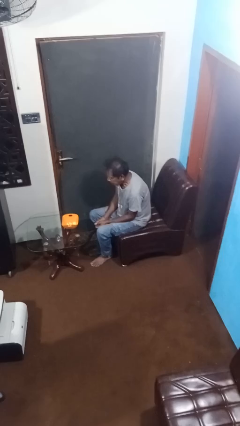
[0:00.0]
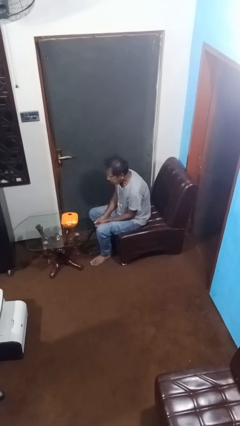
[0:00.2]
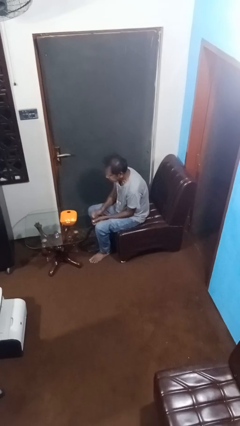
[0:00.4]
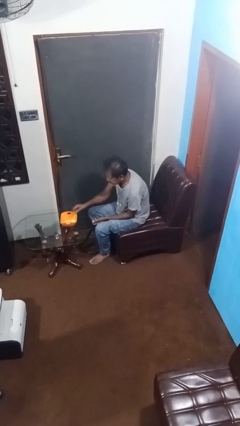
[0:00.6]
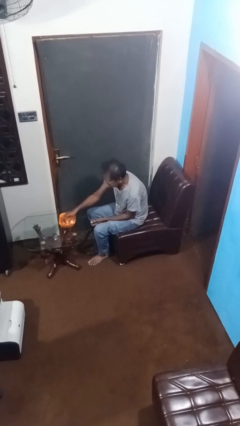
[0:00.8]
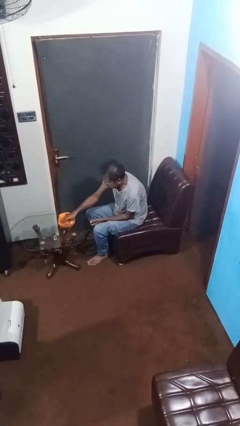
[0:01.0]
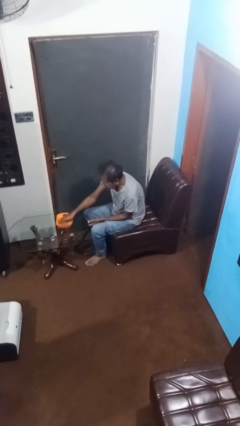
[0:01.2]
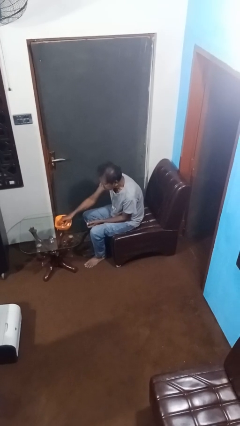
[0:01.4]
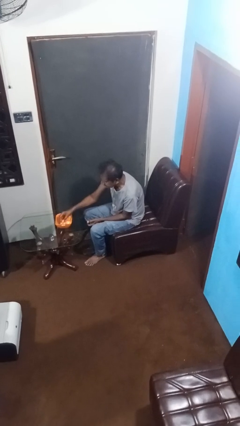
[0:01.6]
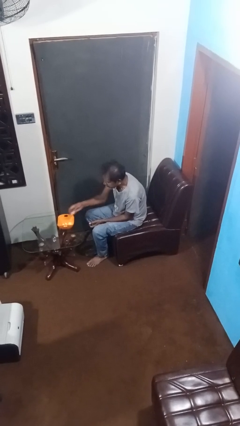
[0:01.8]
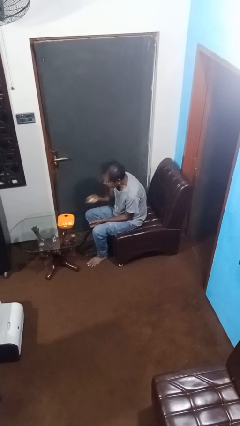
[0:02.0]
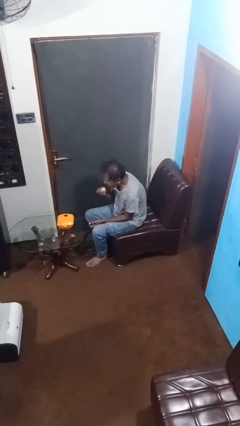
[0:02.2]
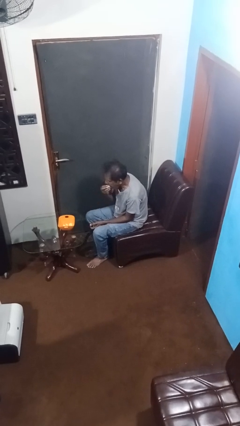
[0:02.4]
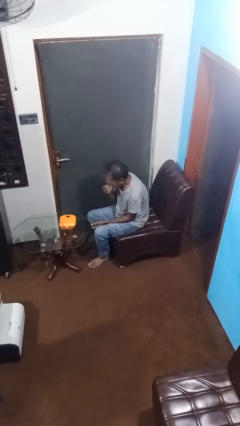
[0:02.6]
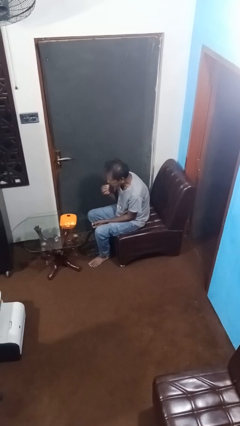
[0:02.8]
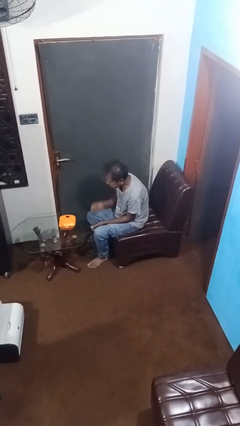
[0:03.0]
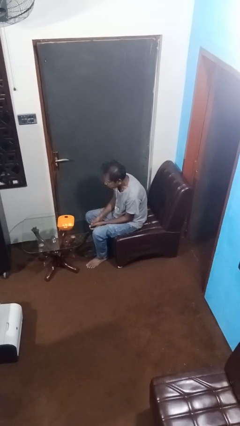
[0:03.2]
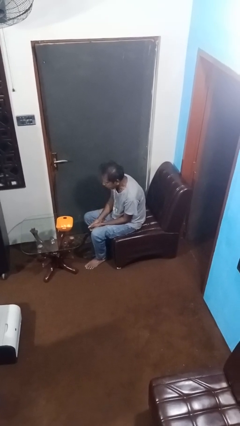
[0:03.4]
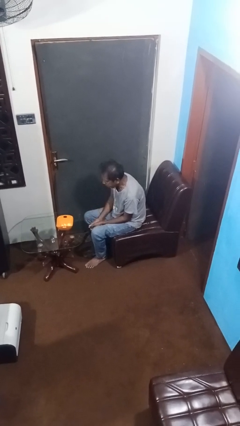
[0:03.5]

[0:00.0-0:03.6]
person eats with hands

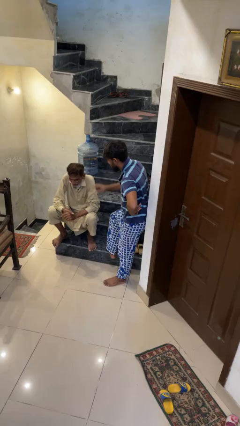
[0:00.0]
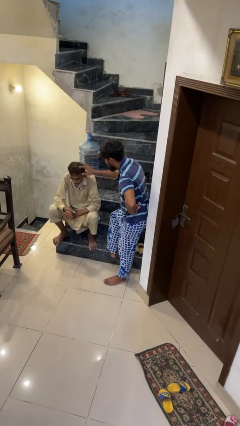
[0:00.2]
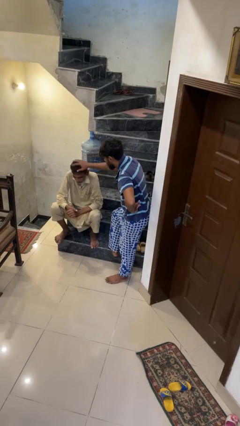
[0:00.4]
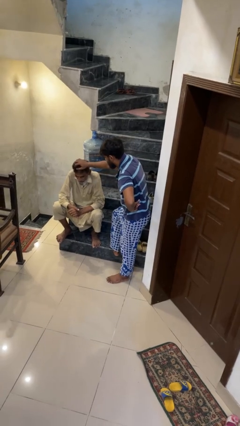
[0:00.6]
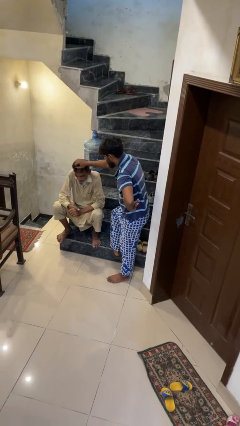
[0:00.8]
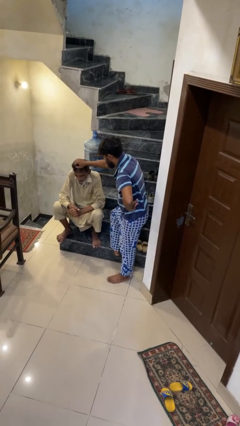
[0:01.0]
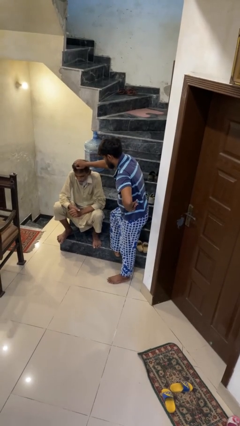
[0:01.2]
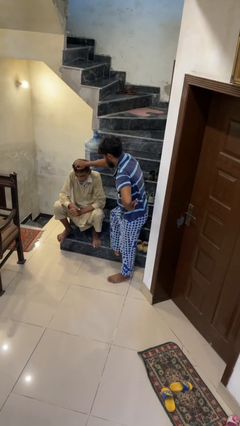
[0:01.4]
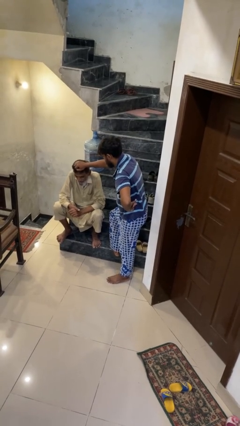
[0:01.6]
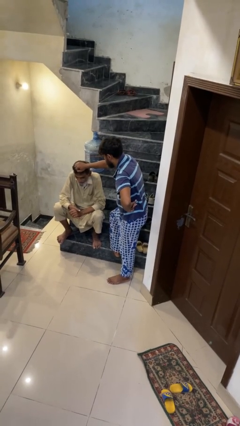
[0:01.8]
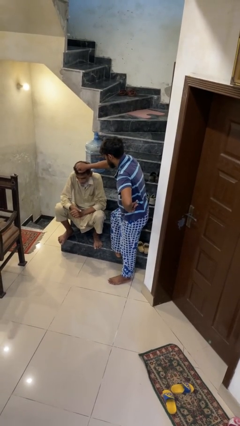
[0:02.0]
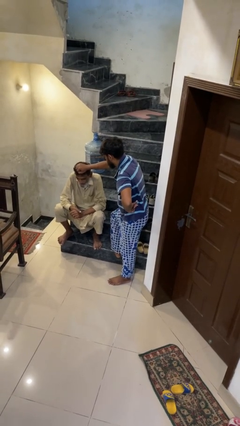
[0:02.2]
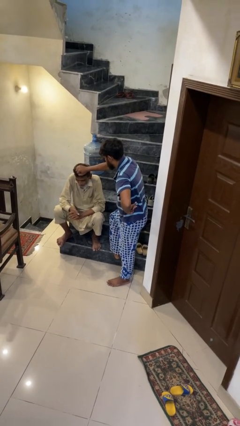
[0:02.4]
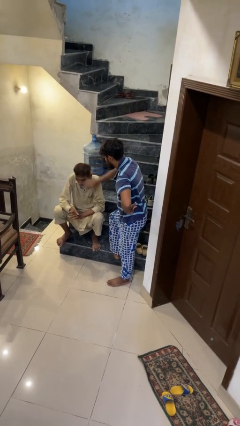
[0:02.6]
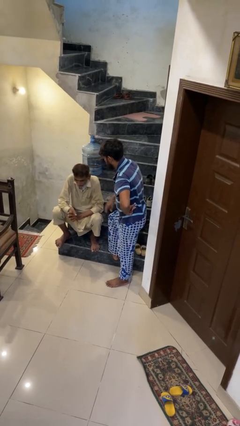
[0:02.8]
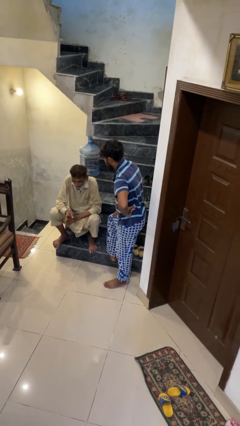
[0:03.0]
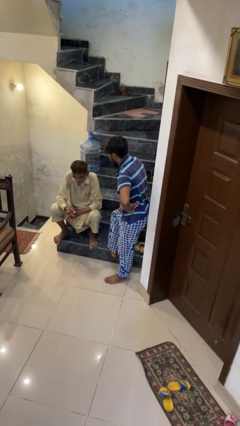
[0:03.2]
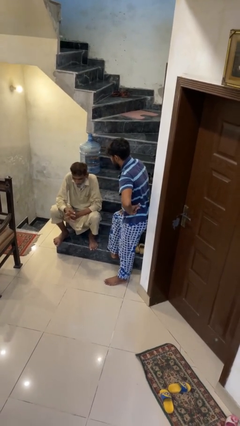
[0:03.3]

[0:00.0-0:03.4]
person grabs person by hair

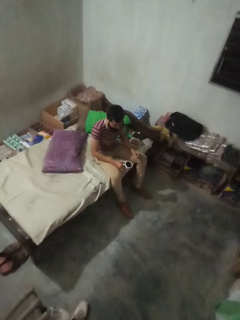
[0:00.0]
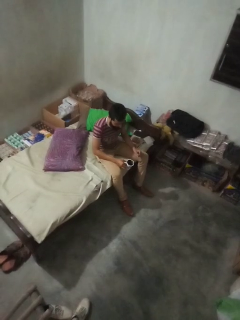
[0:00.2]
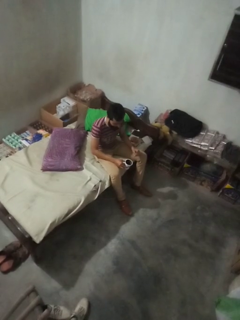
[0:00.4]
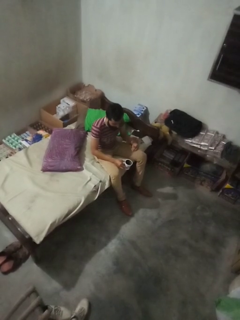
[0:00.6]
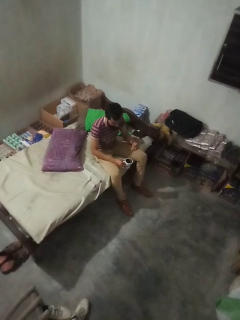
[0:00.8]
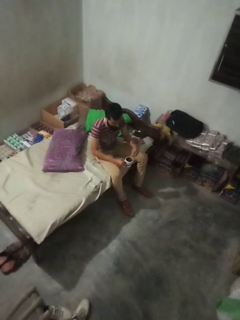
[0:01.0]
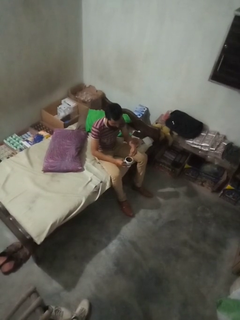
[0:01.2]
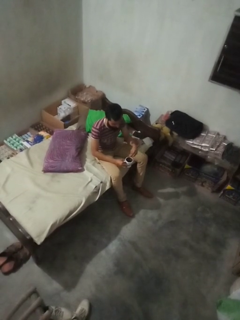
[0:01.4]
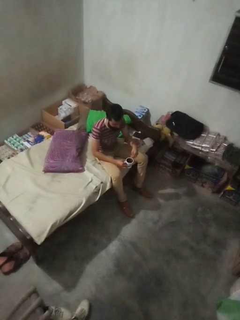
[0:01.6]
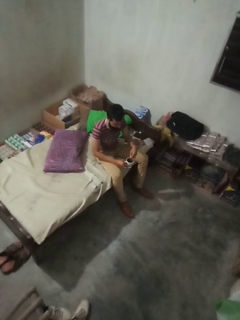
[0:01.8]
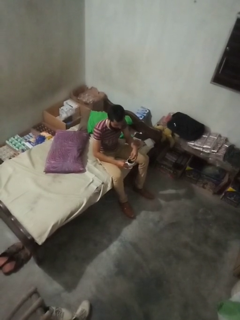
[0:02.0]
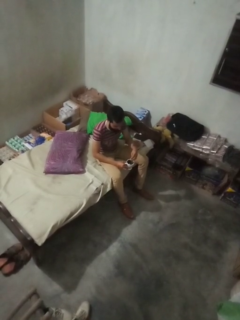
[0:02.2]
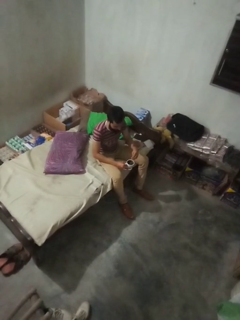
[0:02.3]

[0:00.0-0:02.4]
person stirs mug

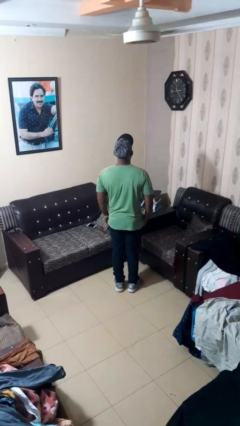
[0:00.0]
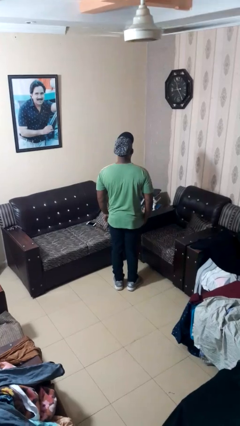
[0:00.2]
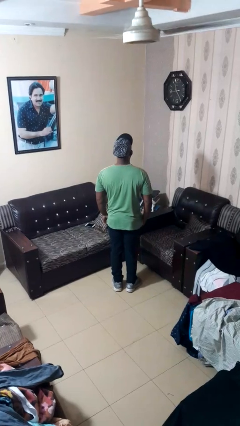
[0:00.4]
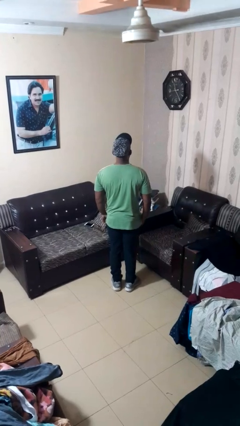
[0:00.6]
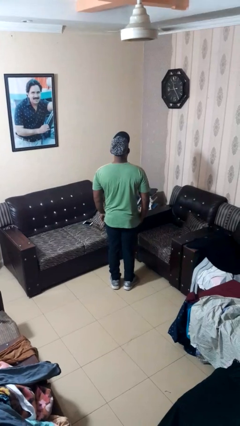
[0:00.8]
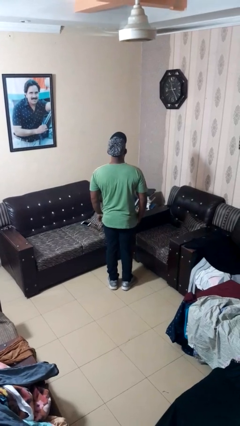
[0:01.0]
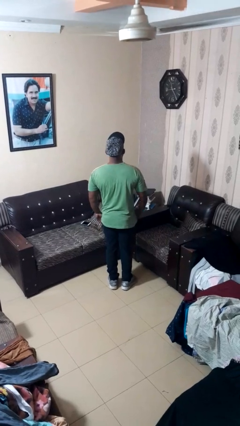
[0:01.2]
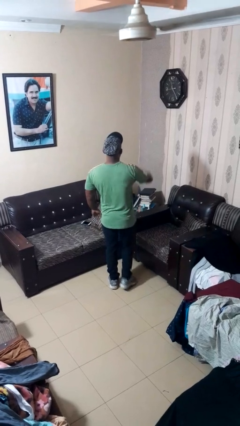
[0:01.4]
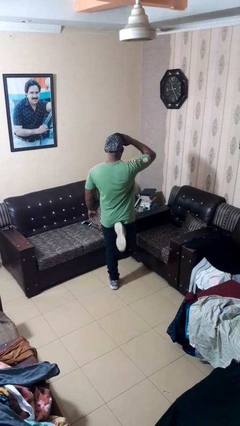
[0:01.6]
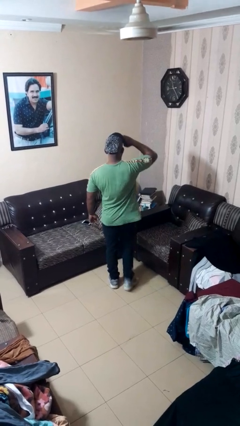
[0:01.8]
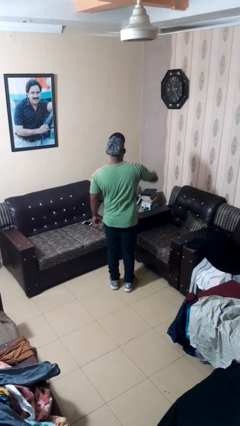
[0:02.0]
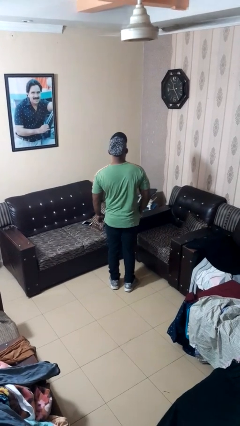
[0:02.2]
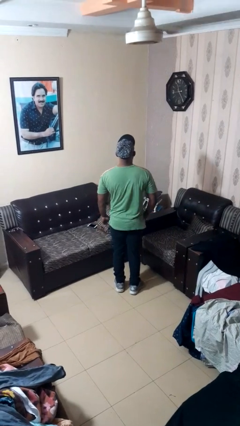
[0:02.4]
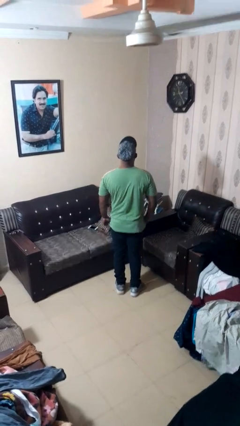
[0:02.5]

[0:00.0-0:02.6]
person salutes

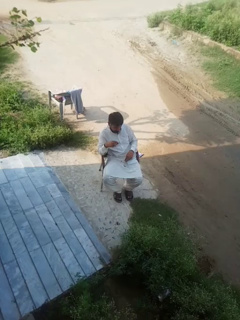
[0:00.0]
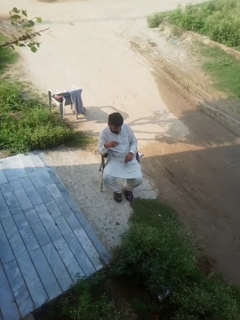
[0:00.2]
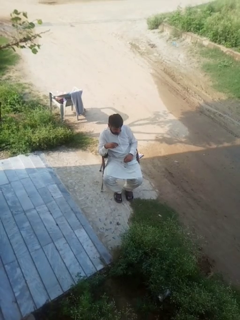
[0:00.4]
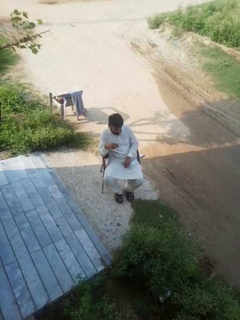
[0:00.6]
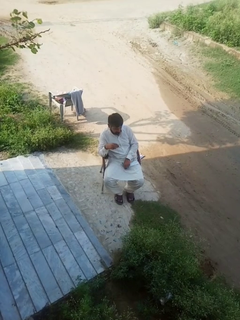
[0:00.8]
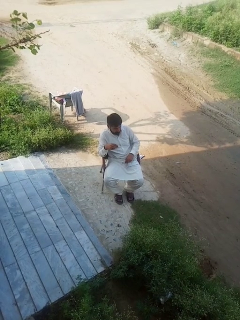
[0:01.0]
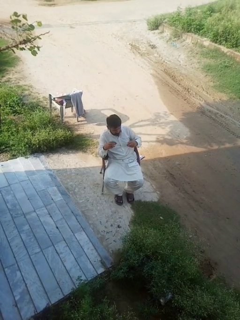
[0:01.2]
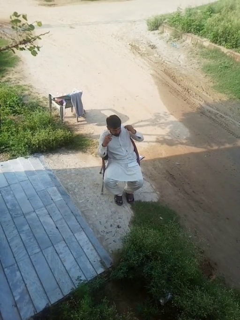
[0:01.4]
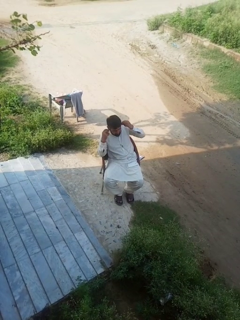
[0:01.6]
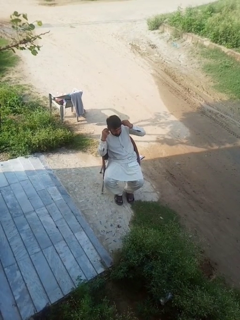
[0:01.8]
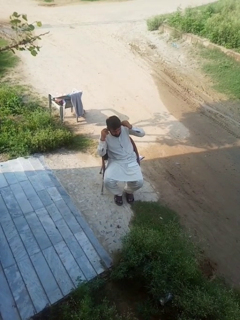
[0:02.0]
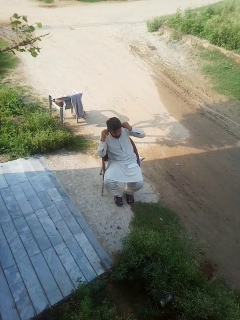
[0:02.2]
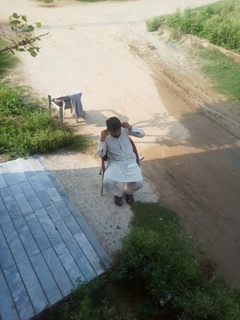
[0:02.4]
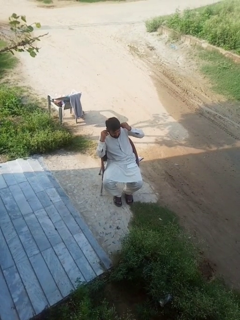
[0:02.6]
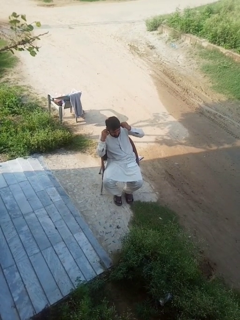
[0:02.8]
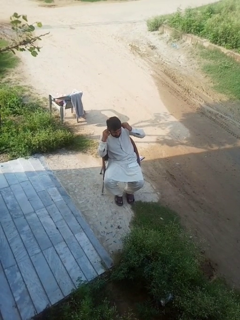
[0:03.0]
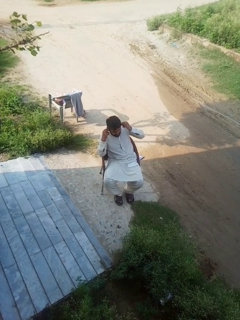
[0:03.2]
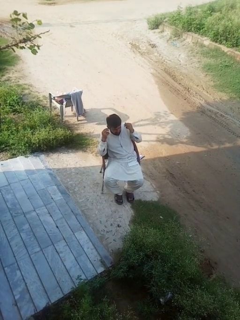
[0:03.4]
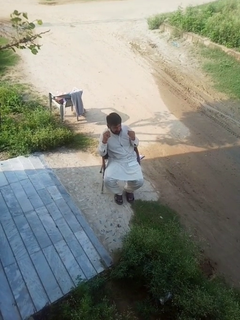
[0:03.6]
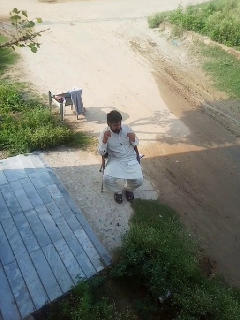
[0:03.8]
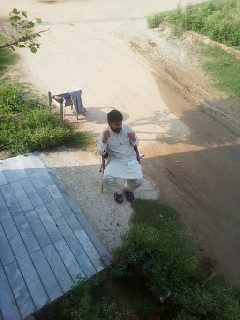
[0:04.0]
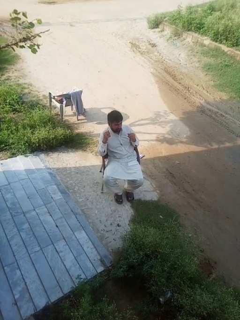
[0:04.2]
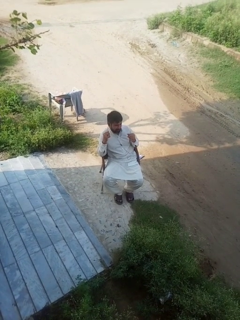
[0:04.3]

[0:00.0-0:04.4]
person puts on headphones

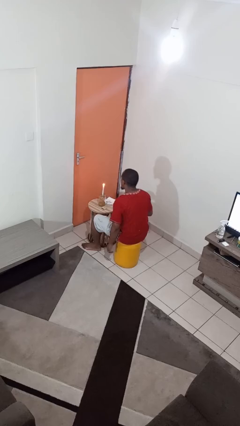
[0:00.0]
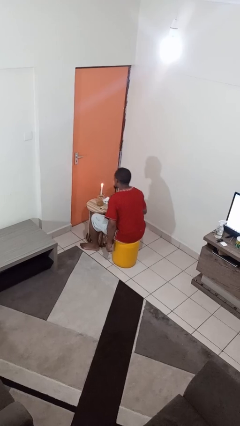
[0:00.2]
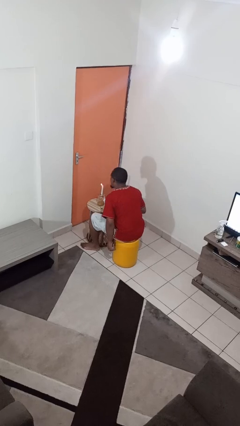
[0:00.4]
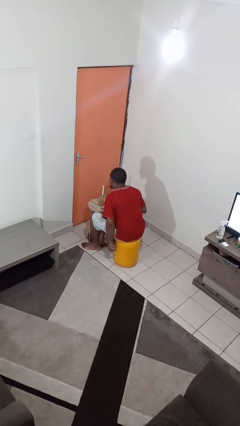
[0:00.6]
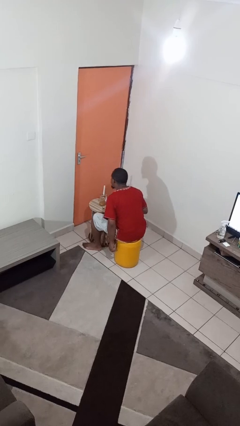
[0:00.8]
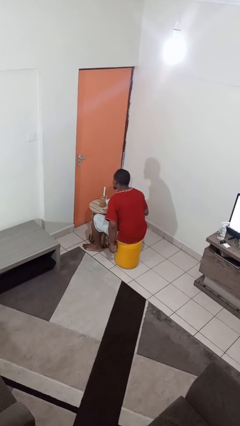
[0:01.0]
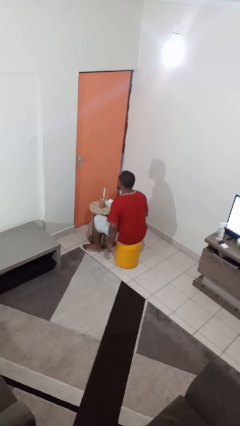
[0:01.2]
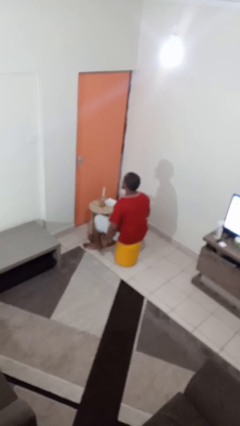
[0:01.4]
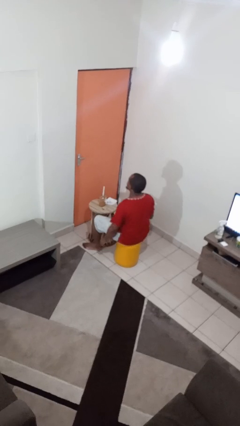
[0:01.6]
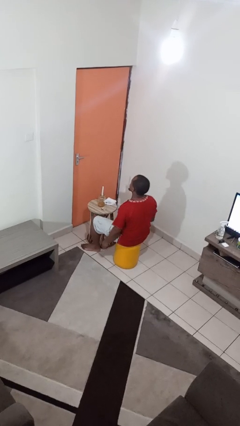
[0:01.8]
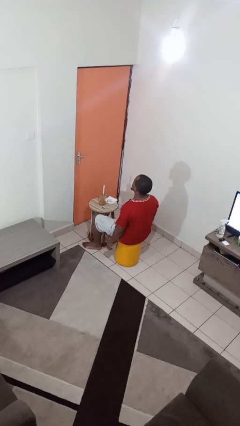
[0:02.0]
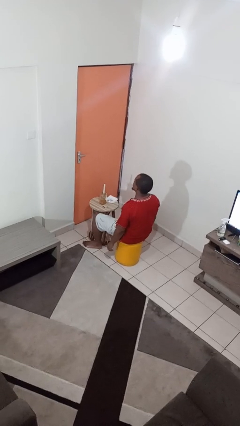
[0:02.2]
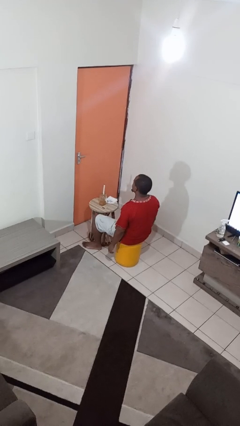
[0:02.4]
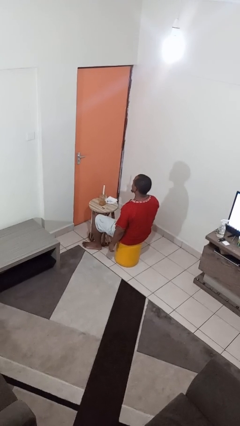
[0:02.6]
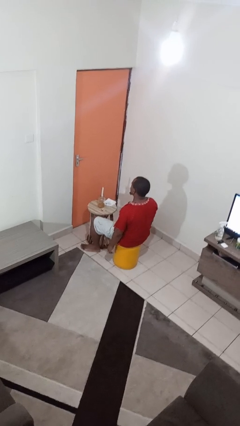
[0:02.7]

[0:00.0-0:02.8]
person extinguishes candle
